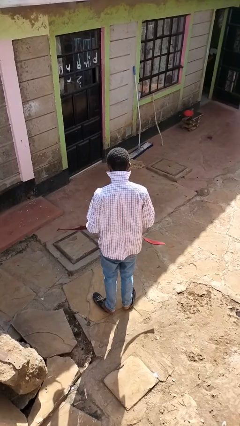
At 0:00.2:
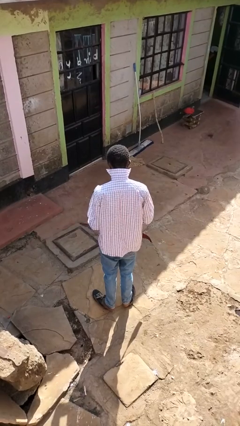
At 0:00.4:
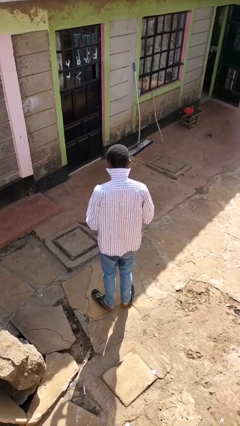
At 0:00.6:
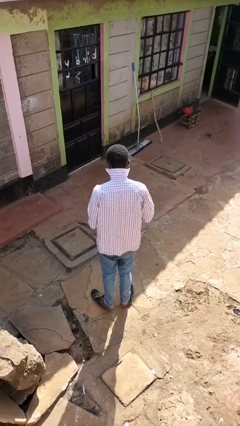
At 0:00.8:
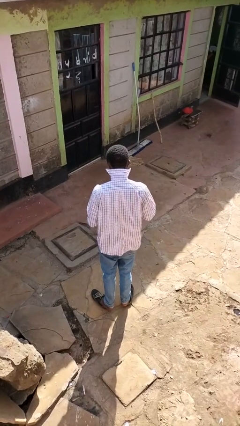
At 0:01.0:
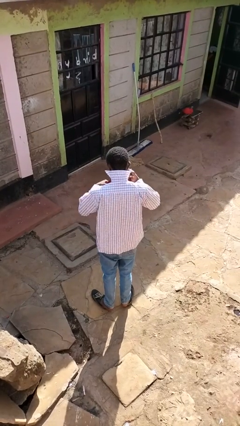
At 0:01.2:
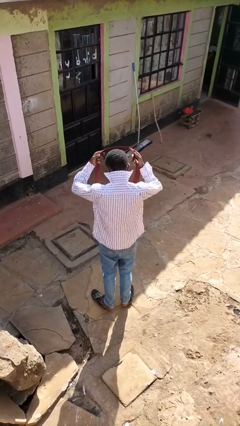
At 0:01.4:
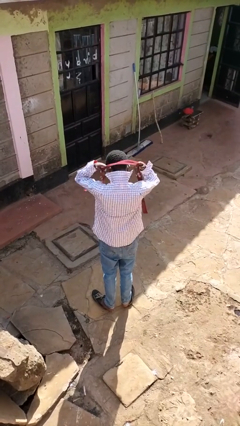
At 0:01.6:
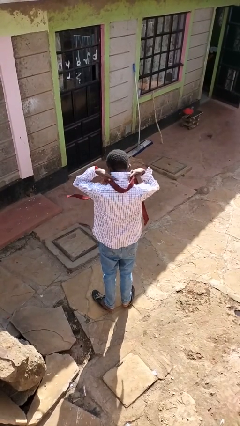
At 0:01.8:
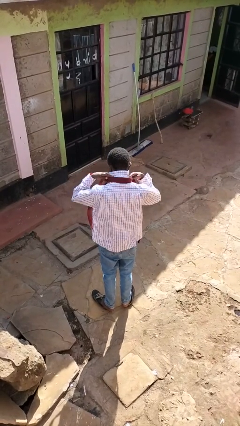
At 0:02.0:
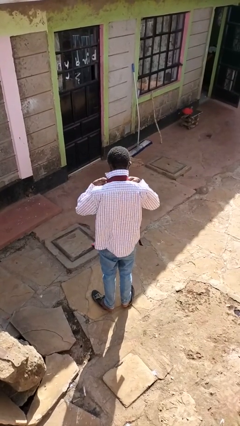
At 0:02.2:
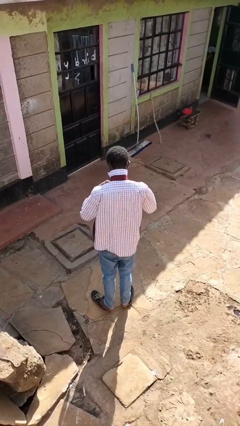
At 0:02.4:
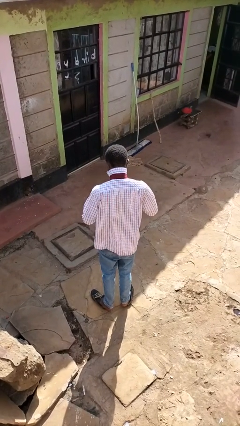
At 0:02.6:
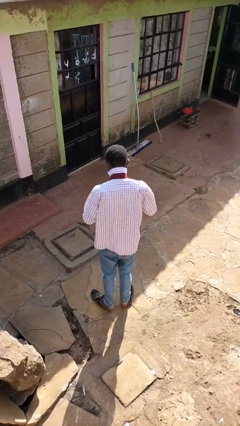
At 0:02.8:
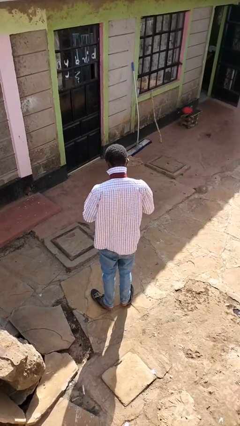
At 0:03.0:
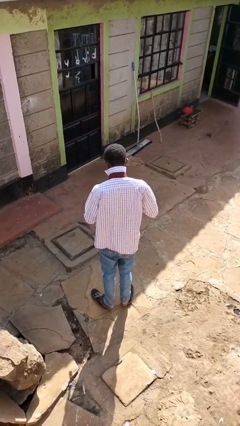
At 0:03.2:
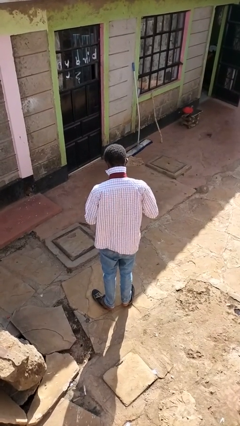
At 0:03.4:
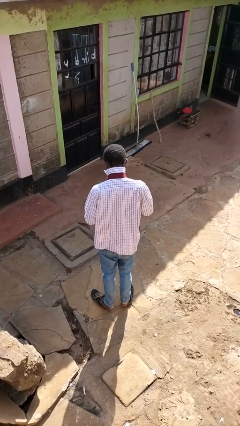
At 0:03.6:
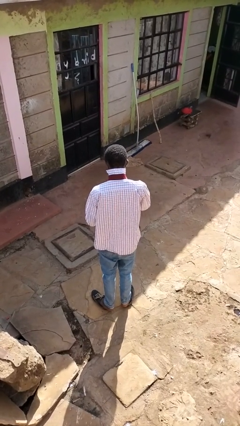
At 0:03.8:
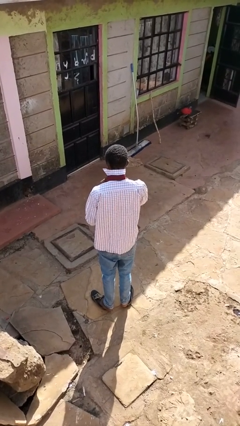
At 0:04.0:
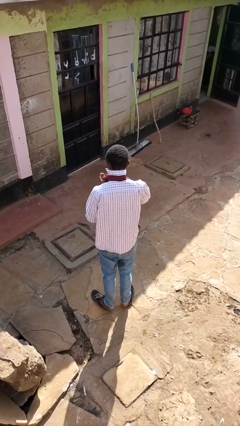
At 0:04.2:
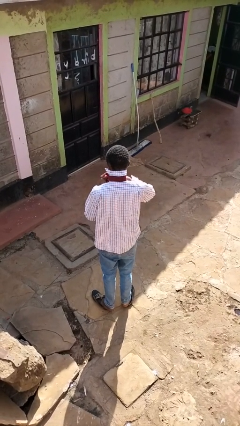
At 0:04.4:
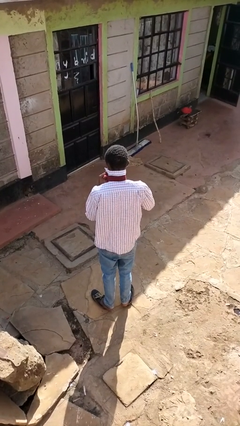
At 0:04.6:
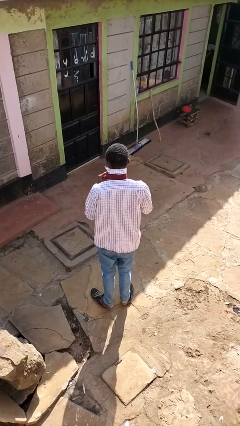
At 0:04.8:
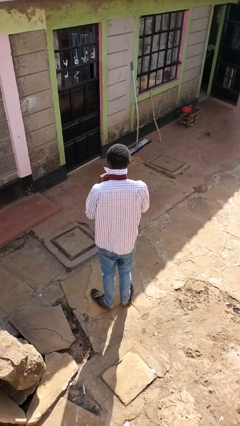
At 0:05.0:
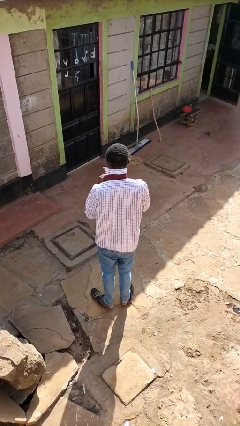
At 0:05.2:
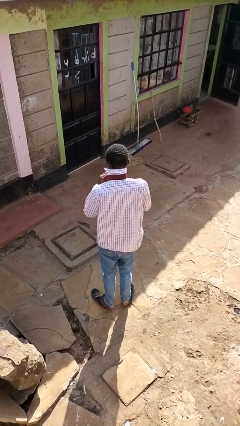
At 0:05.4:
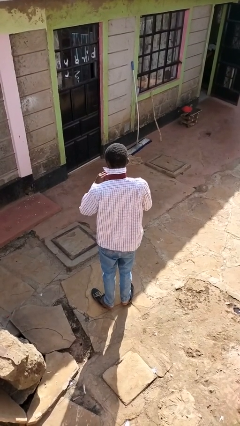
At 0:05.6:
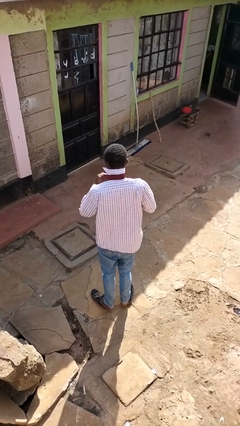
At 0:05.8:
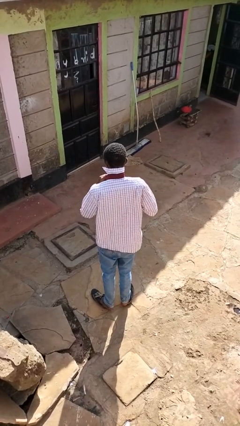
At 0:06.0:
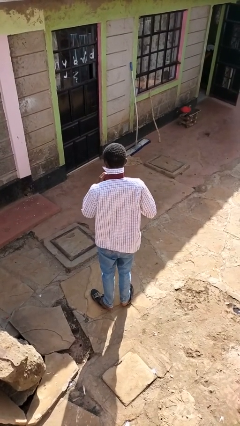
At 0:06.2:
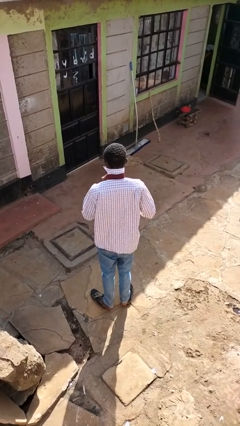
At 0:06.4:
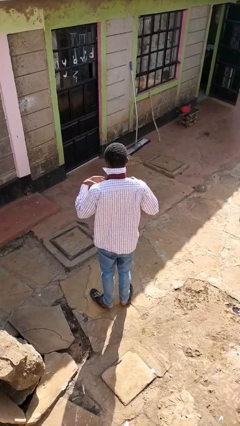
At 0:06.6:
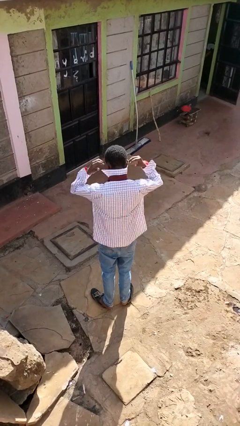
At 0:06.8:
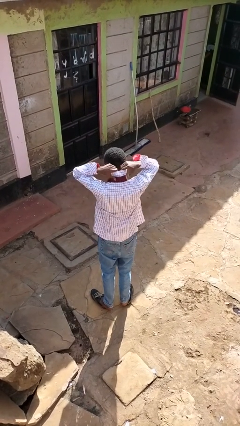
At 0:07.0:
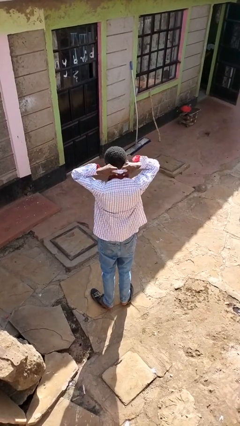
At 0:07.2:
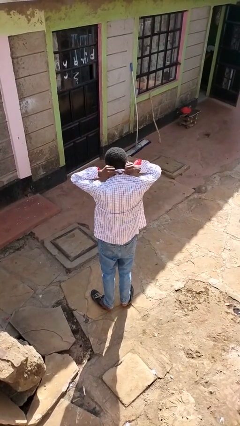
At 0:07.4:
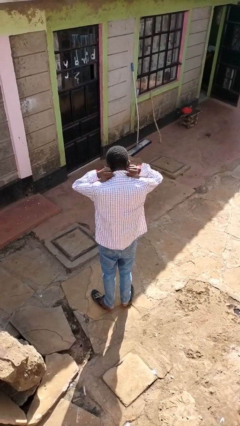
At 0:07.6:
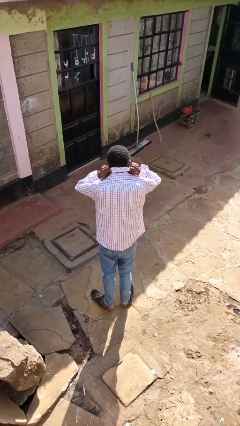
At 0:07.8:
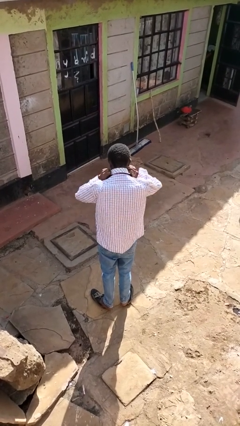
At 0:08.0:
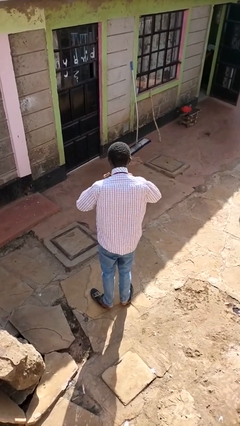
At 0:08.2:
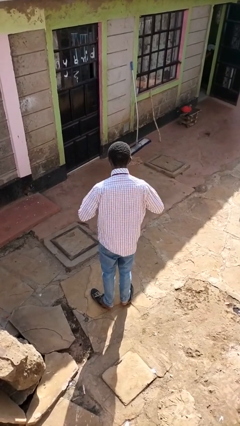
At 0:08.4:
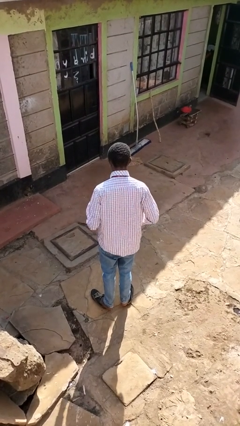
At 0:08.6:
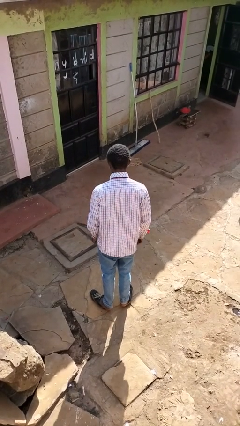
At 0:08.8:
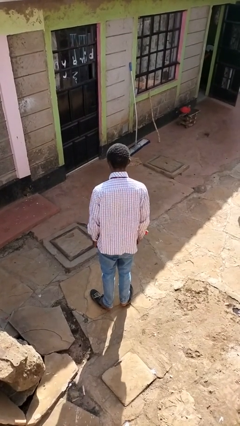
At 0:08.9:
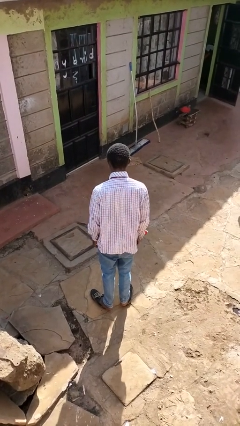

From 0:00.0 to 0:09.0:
person puts on necktie

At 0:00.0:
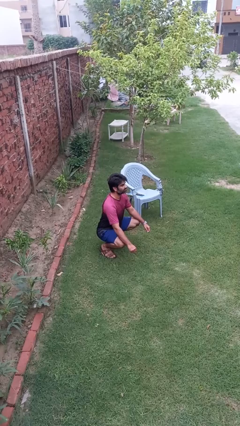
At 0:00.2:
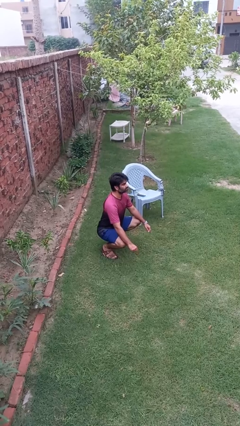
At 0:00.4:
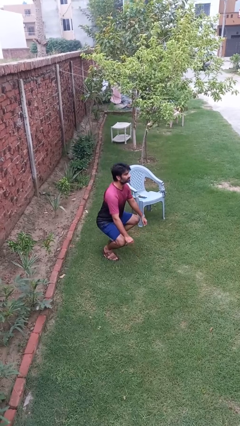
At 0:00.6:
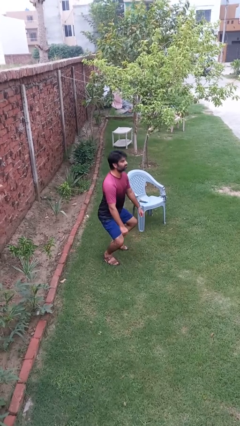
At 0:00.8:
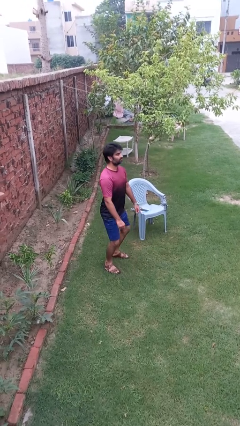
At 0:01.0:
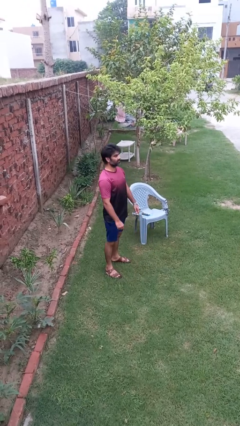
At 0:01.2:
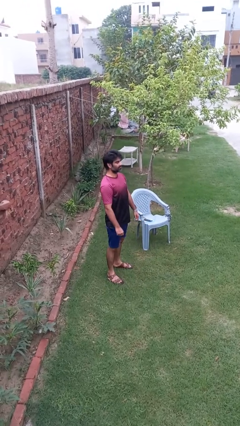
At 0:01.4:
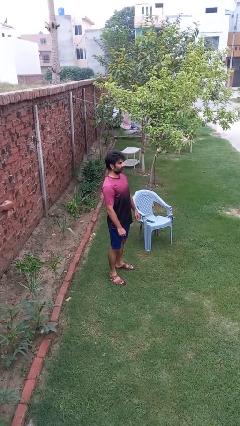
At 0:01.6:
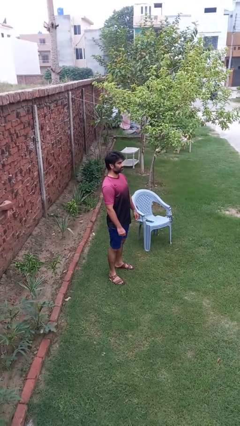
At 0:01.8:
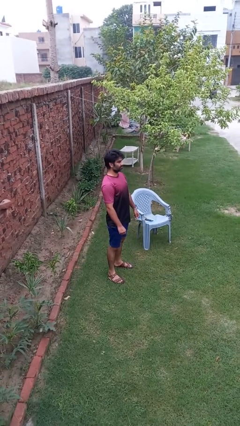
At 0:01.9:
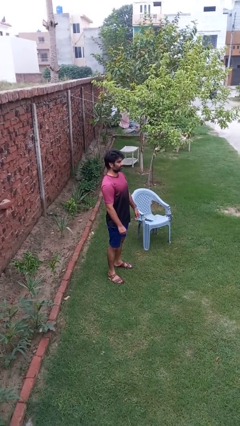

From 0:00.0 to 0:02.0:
person stands up

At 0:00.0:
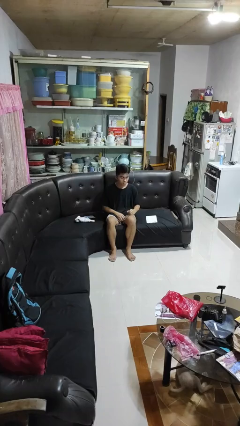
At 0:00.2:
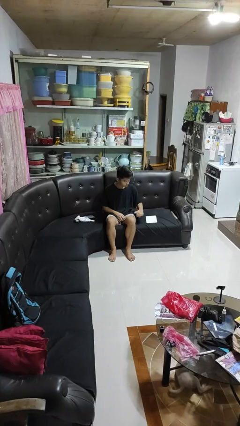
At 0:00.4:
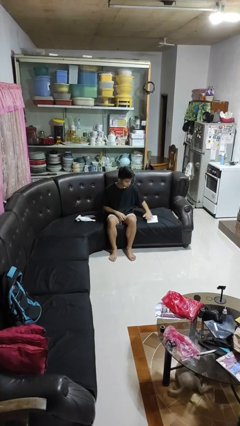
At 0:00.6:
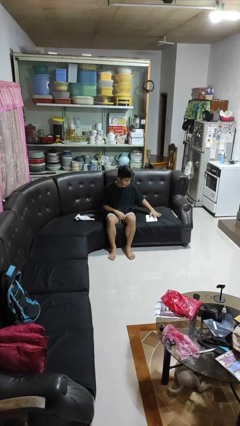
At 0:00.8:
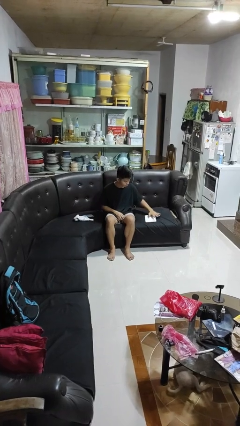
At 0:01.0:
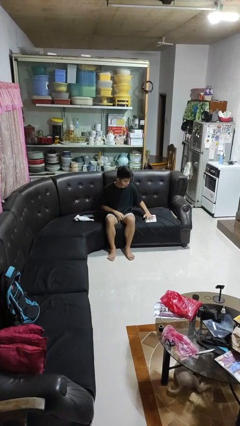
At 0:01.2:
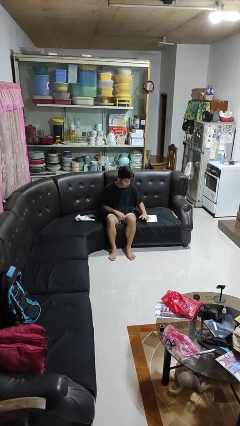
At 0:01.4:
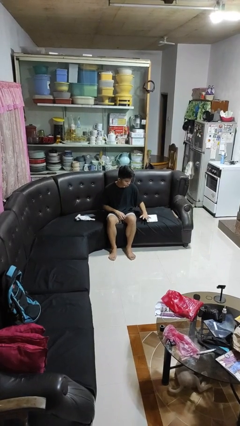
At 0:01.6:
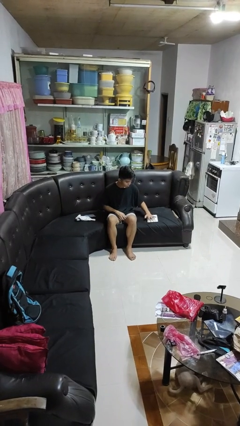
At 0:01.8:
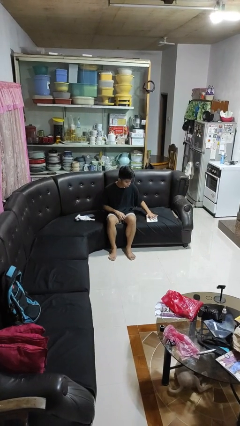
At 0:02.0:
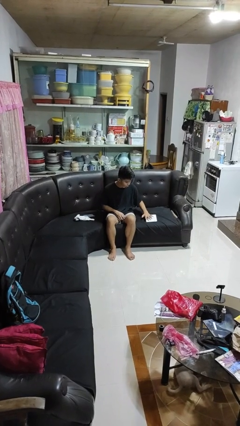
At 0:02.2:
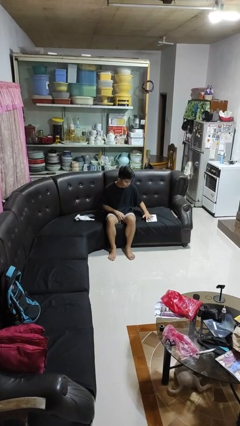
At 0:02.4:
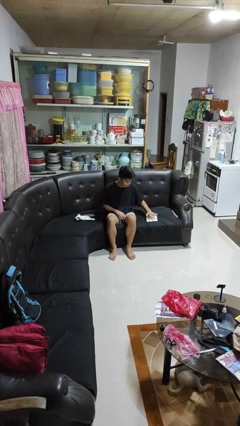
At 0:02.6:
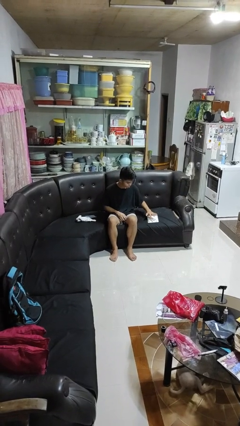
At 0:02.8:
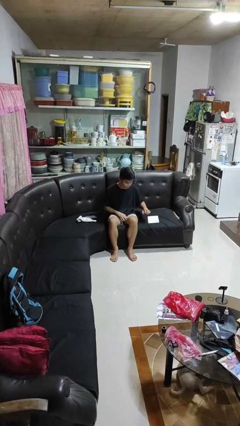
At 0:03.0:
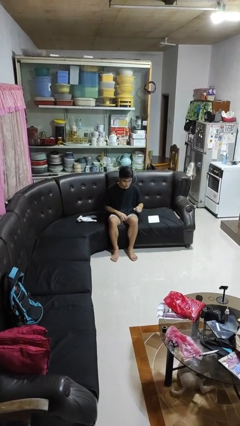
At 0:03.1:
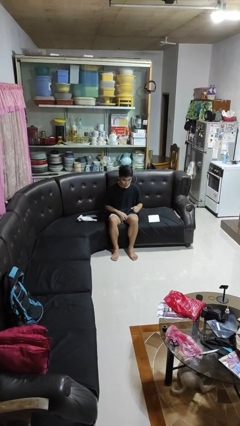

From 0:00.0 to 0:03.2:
person waves hand over object

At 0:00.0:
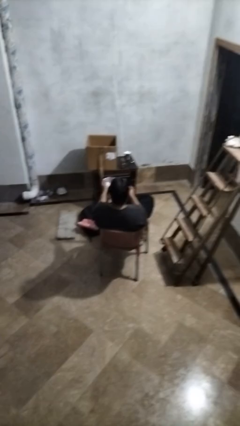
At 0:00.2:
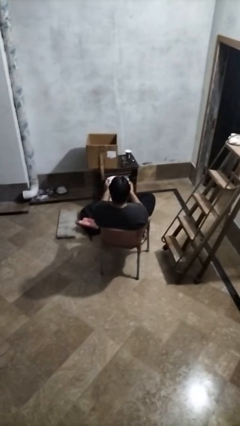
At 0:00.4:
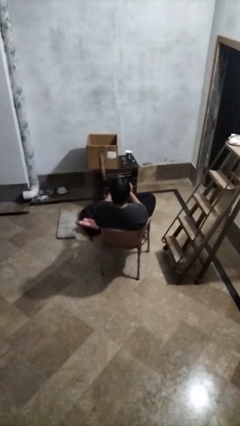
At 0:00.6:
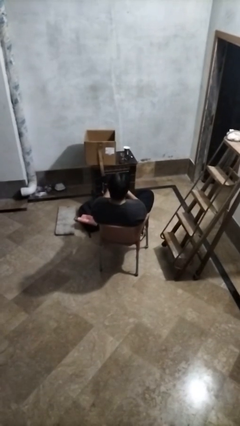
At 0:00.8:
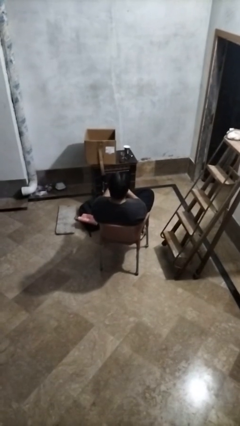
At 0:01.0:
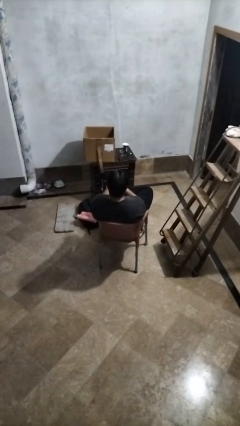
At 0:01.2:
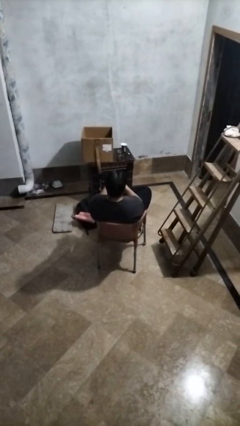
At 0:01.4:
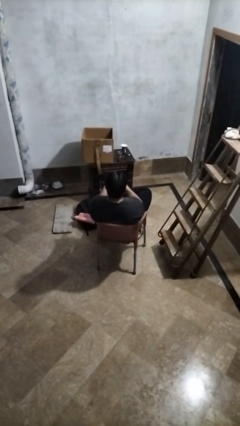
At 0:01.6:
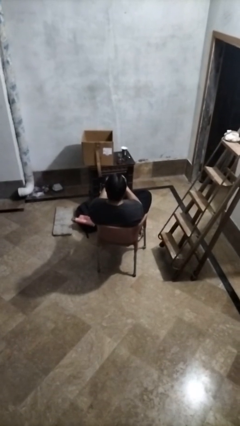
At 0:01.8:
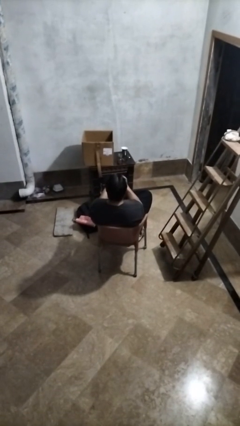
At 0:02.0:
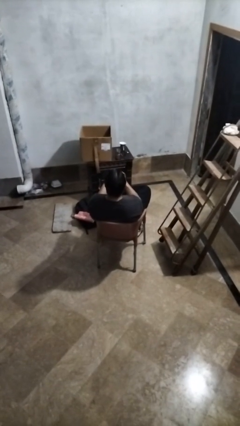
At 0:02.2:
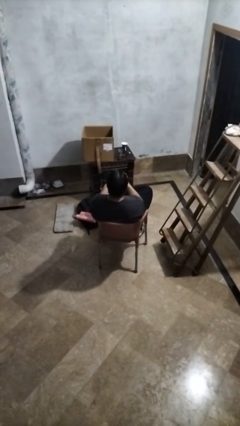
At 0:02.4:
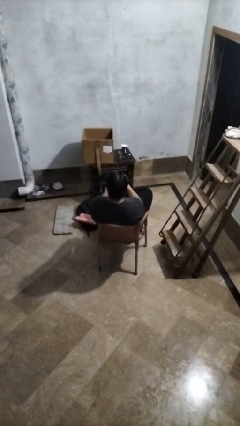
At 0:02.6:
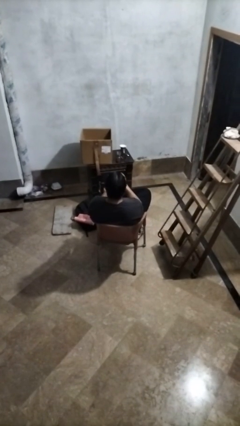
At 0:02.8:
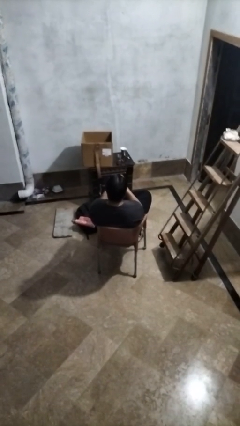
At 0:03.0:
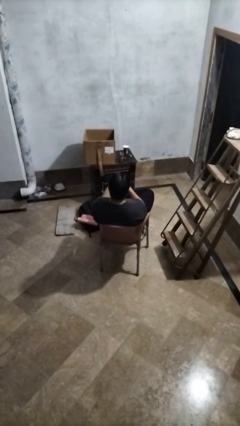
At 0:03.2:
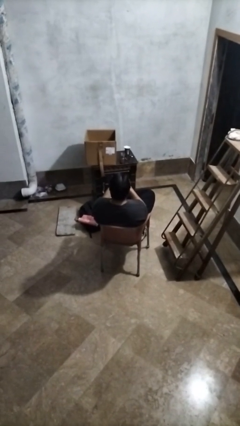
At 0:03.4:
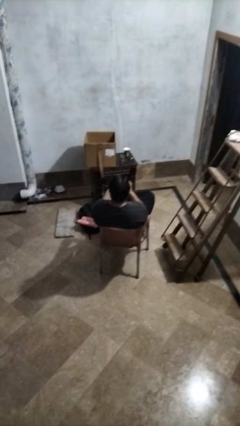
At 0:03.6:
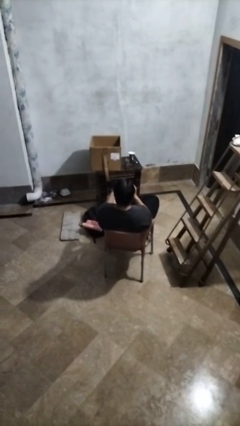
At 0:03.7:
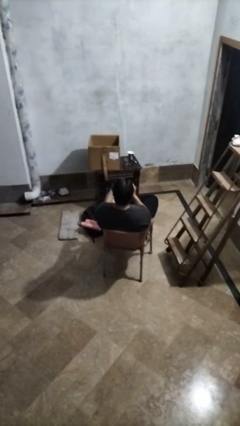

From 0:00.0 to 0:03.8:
person crumples paper
